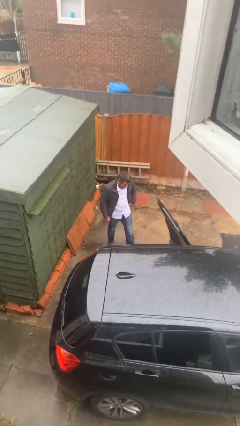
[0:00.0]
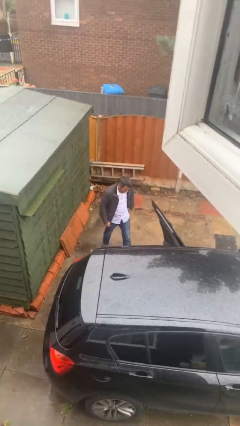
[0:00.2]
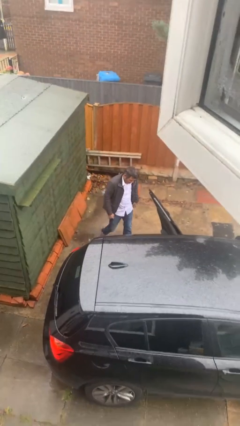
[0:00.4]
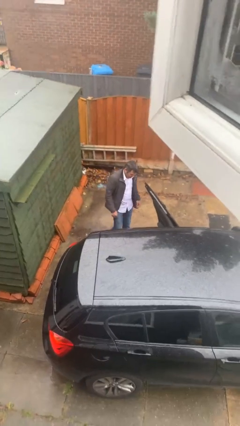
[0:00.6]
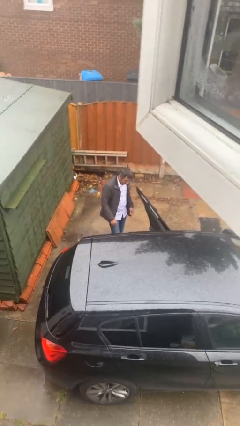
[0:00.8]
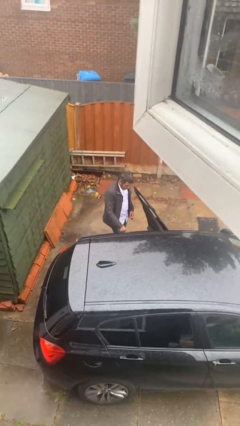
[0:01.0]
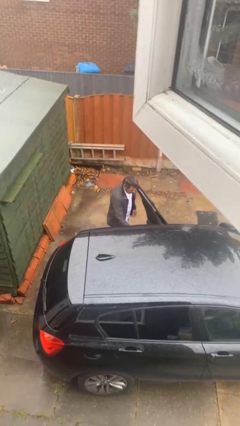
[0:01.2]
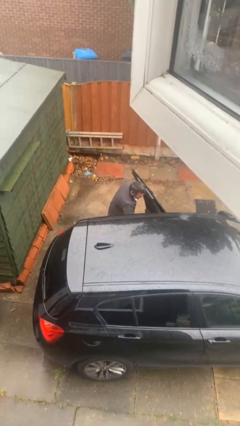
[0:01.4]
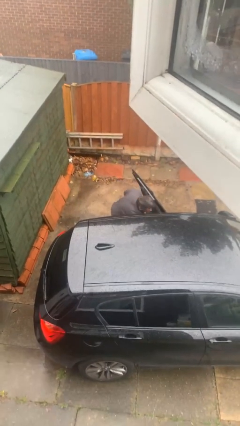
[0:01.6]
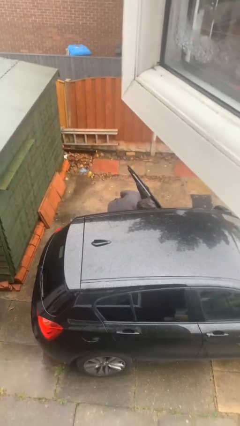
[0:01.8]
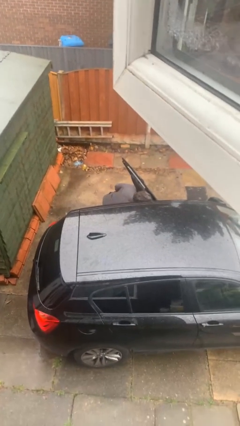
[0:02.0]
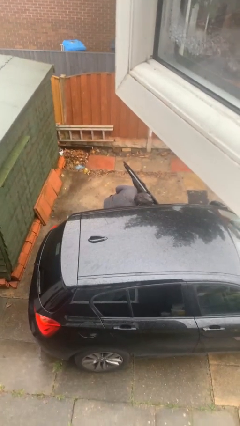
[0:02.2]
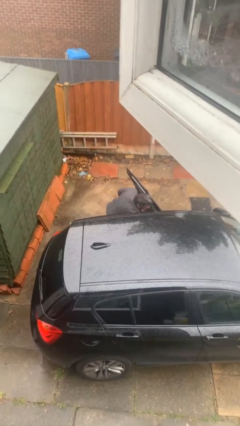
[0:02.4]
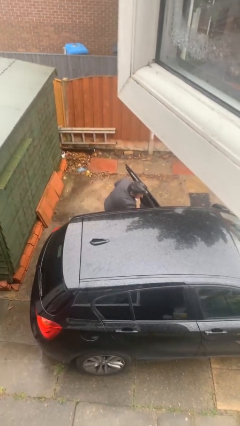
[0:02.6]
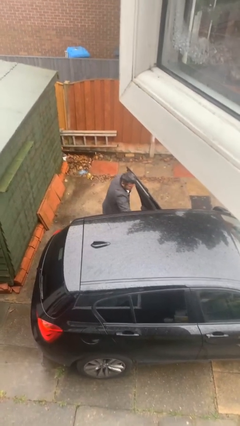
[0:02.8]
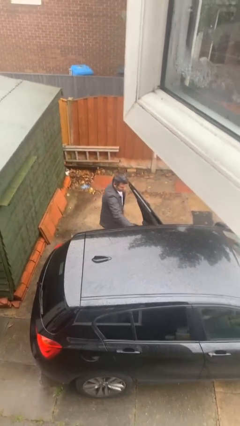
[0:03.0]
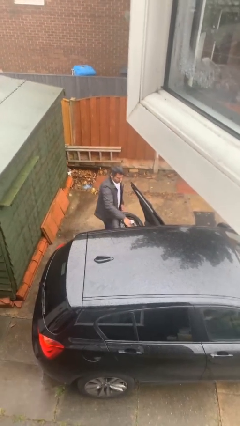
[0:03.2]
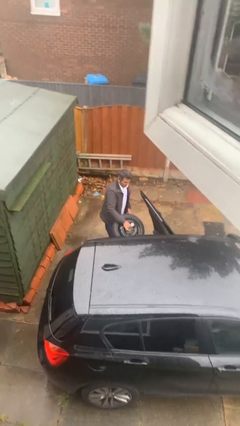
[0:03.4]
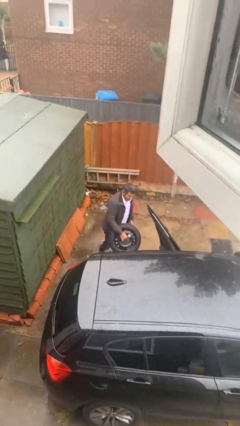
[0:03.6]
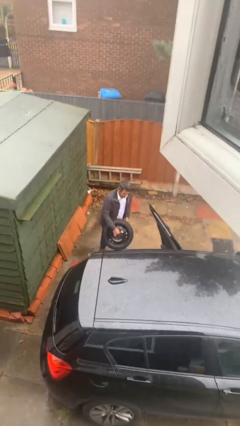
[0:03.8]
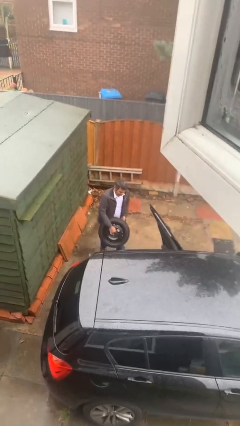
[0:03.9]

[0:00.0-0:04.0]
person unloads car

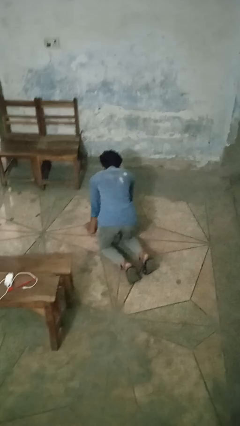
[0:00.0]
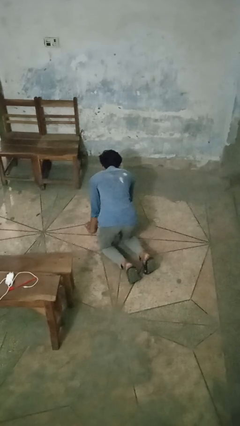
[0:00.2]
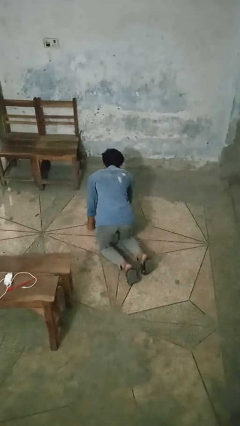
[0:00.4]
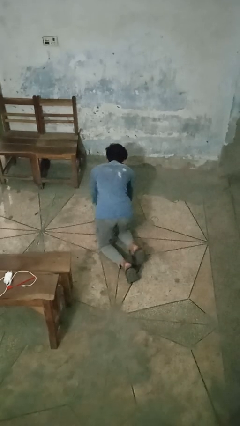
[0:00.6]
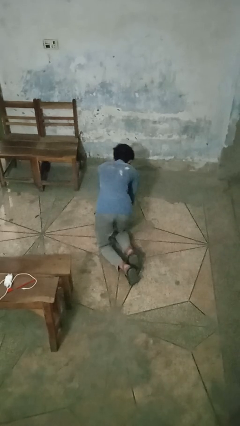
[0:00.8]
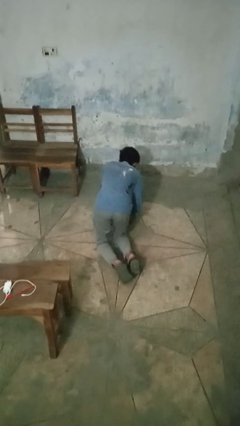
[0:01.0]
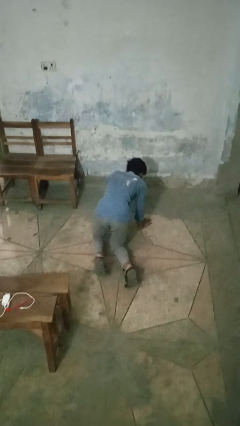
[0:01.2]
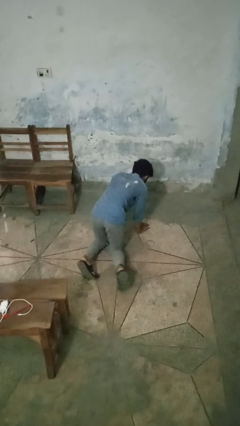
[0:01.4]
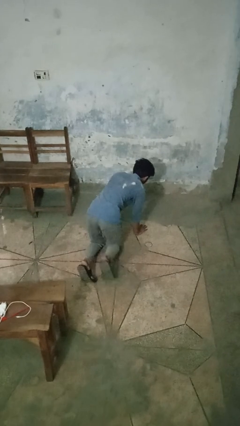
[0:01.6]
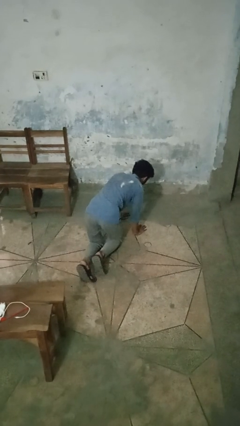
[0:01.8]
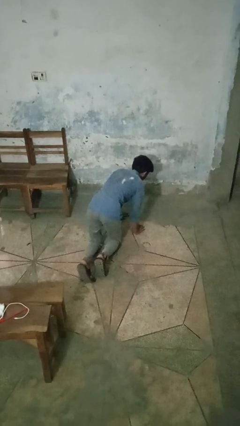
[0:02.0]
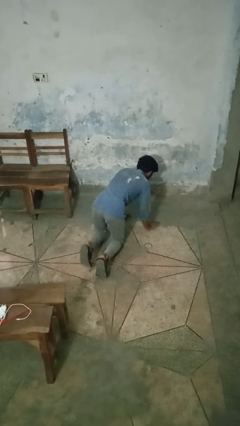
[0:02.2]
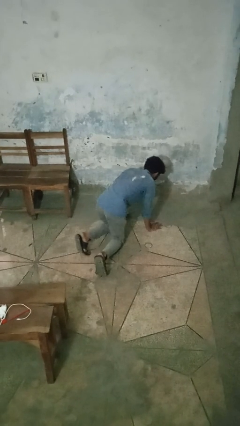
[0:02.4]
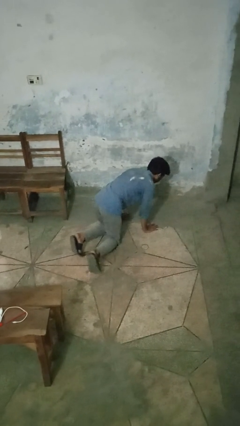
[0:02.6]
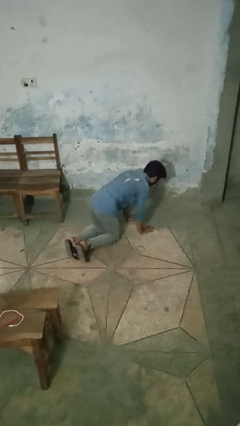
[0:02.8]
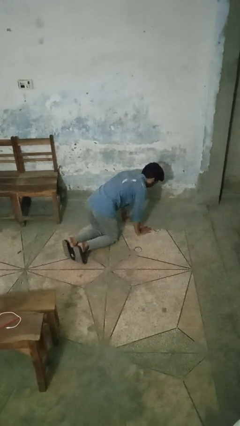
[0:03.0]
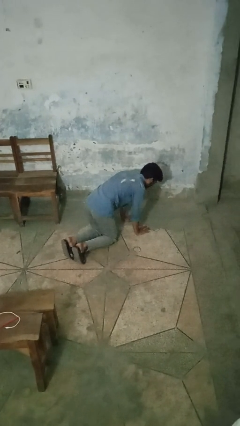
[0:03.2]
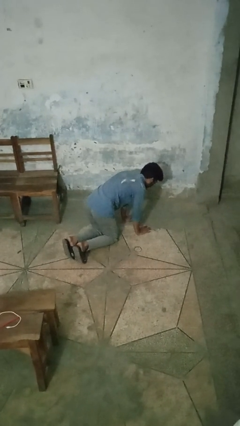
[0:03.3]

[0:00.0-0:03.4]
person crawls

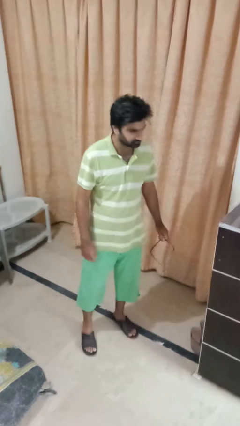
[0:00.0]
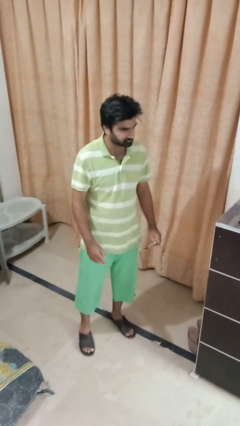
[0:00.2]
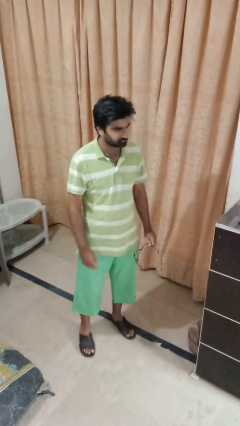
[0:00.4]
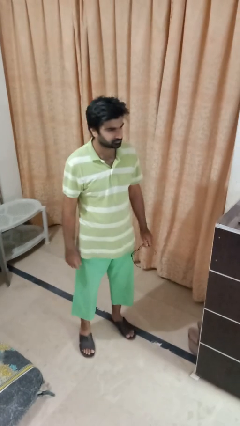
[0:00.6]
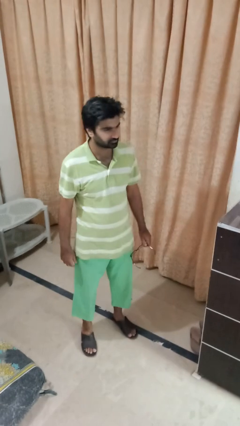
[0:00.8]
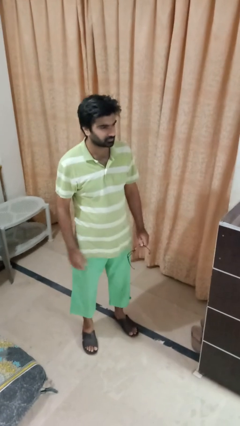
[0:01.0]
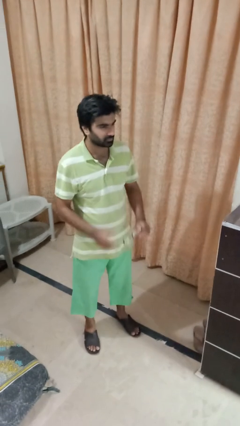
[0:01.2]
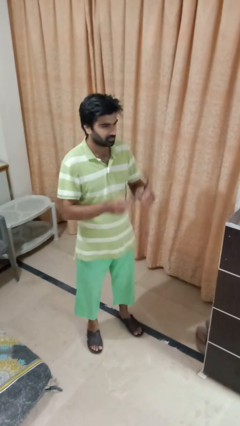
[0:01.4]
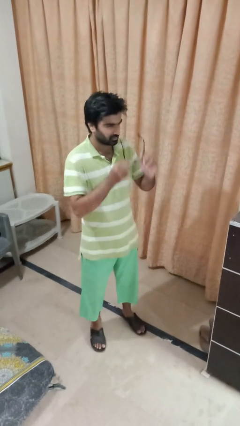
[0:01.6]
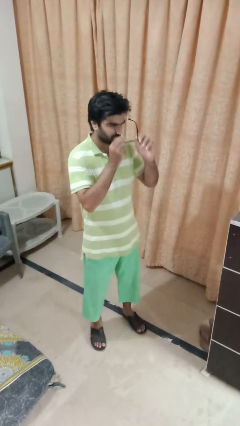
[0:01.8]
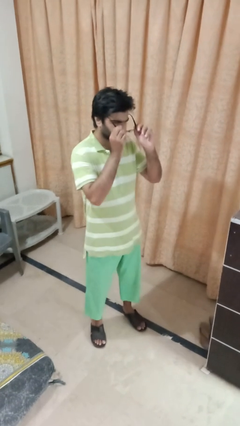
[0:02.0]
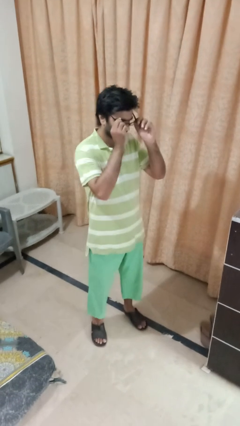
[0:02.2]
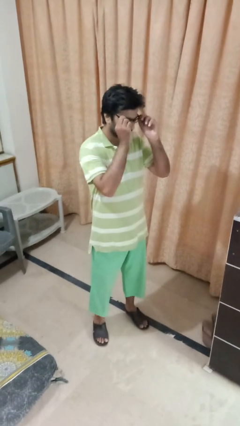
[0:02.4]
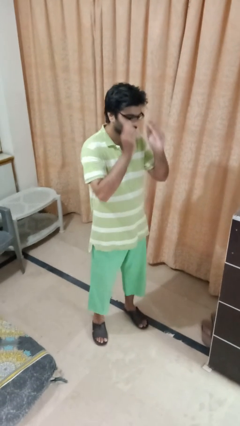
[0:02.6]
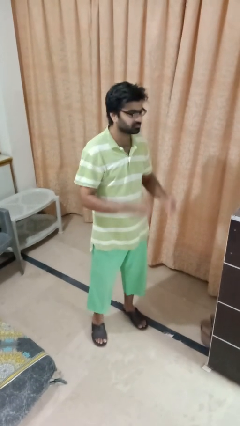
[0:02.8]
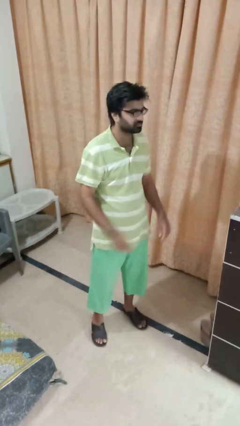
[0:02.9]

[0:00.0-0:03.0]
person puts on glasses

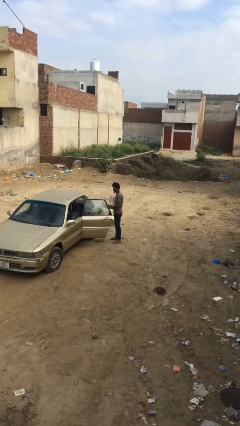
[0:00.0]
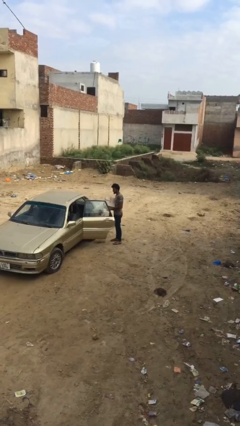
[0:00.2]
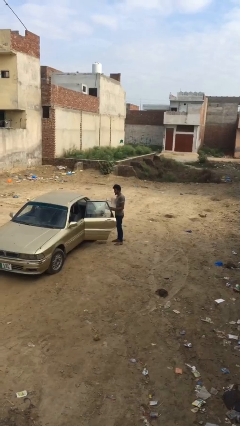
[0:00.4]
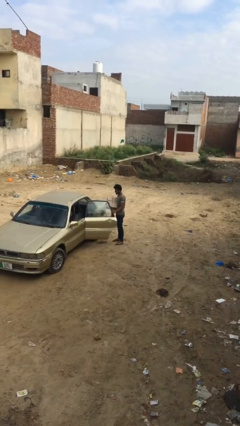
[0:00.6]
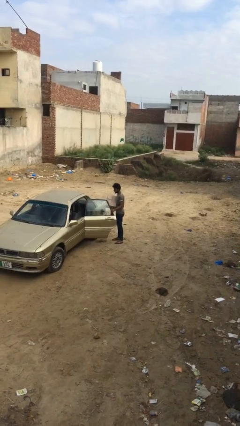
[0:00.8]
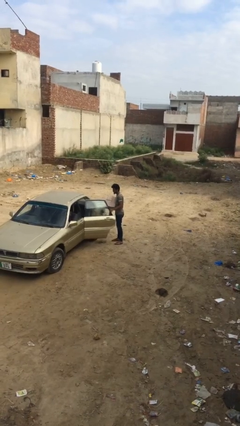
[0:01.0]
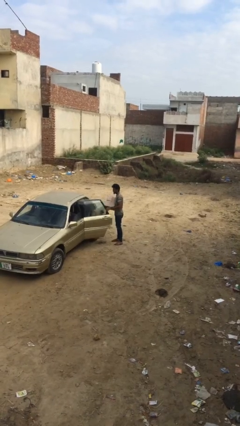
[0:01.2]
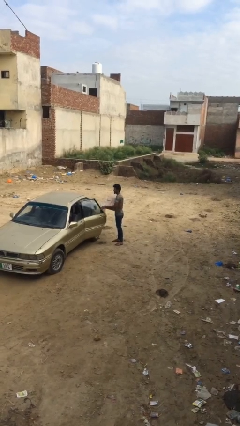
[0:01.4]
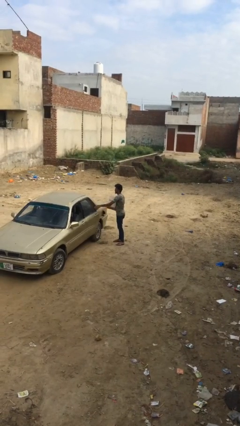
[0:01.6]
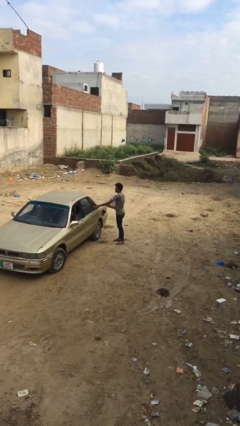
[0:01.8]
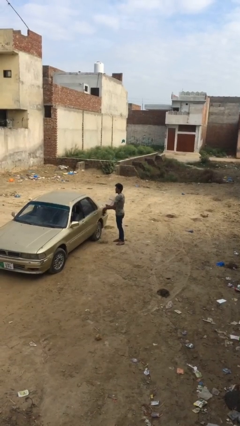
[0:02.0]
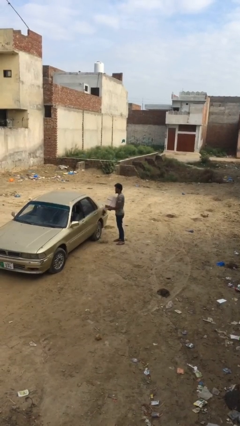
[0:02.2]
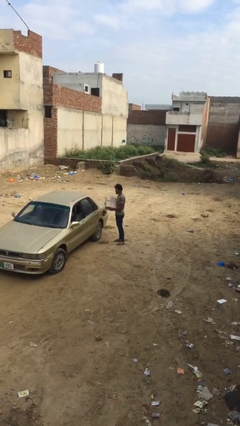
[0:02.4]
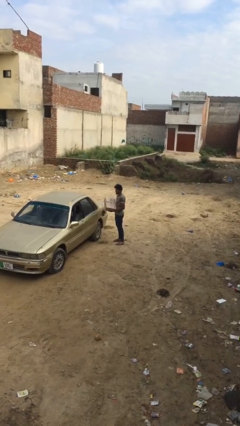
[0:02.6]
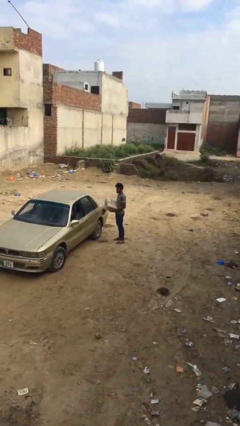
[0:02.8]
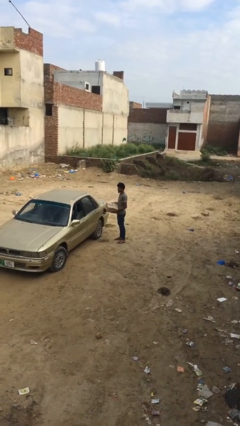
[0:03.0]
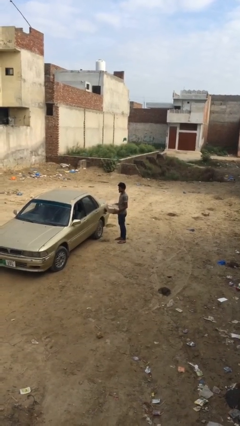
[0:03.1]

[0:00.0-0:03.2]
person closes car door

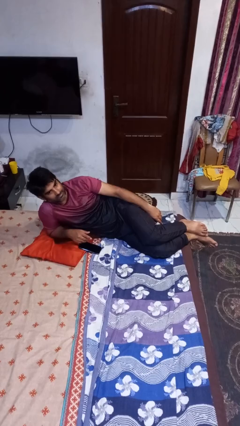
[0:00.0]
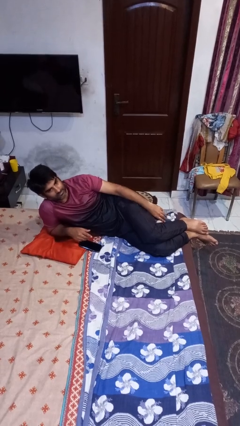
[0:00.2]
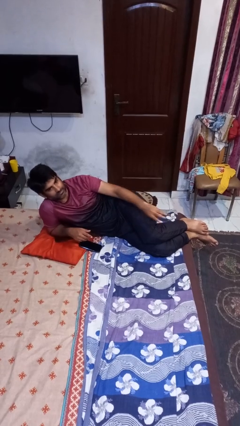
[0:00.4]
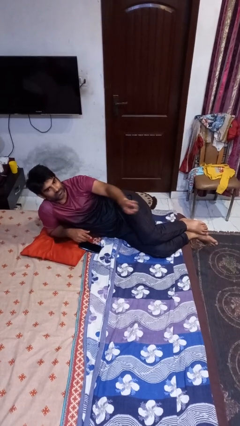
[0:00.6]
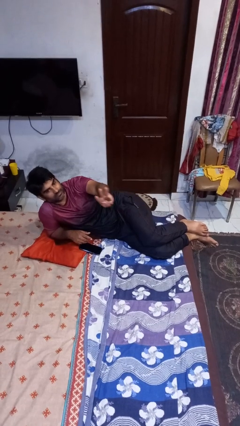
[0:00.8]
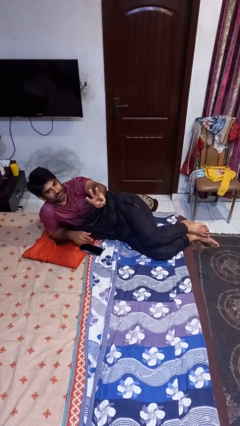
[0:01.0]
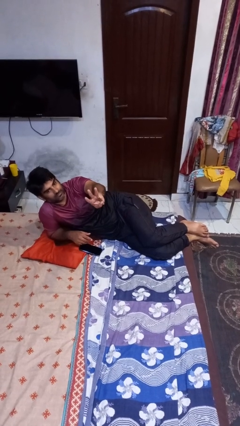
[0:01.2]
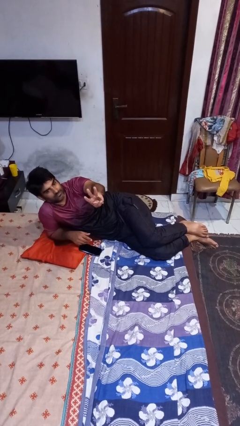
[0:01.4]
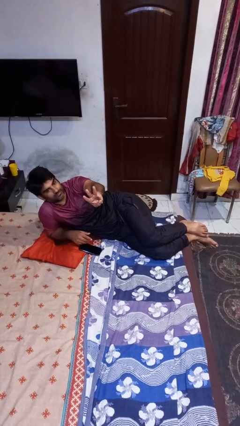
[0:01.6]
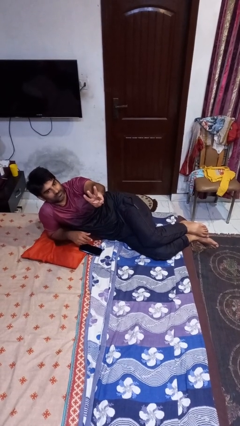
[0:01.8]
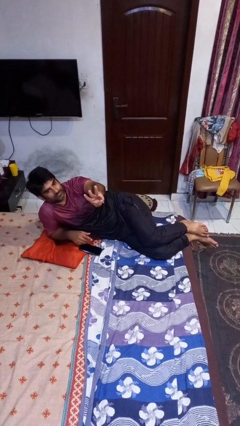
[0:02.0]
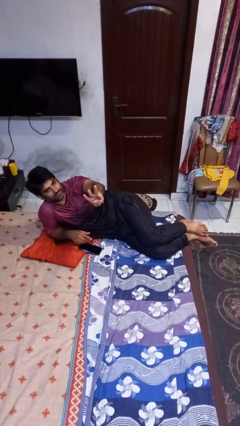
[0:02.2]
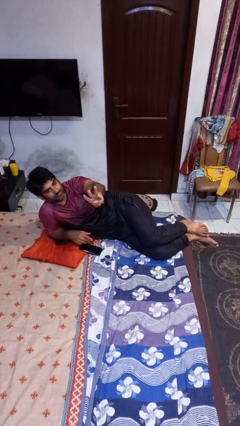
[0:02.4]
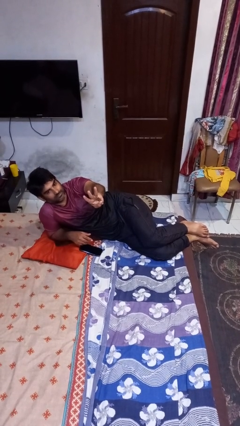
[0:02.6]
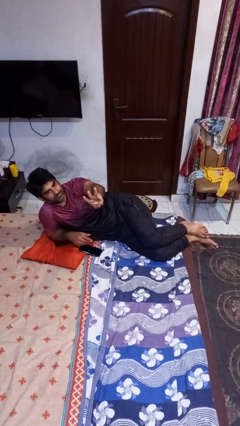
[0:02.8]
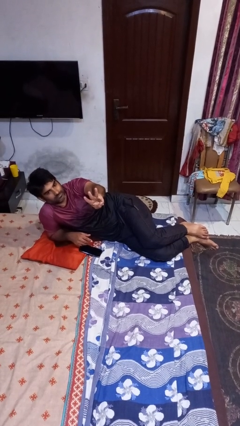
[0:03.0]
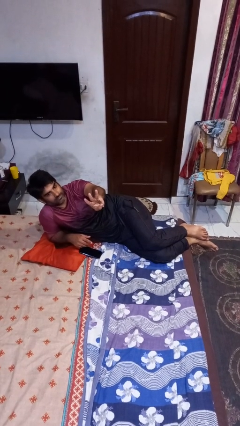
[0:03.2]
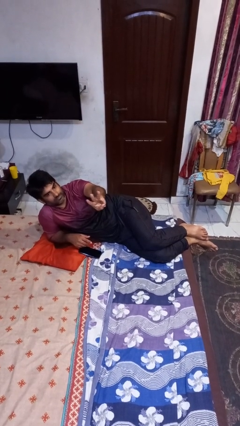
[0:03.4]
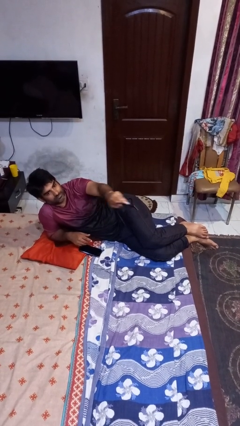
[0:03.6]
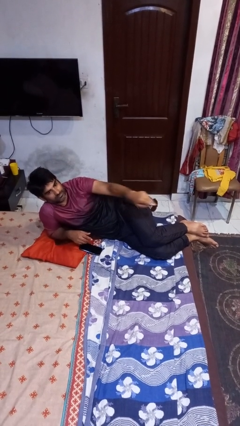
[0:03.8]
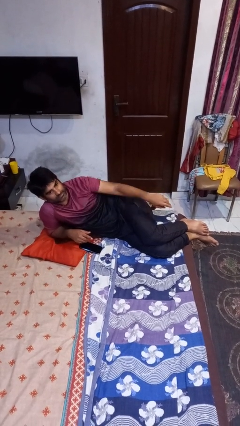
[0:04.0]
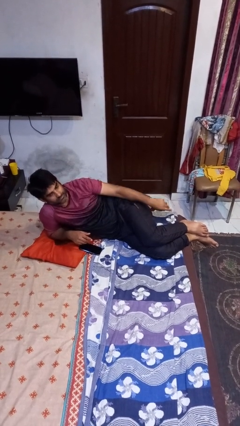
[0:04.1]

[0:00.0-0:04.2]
person gestures number three

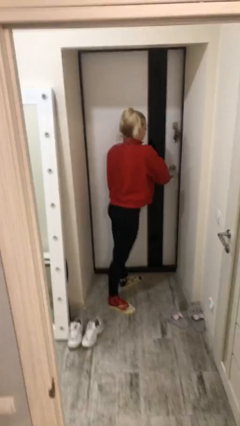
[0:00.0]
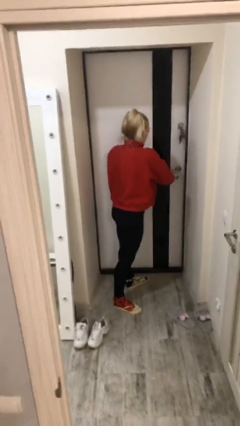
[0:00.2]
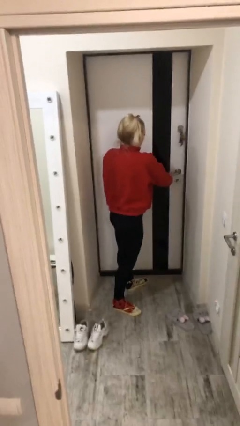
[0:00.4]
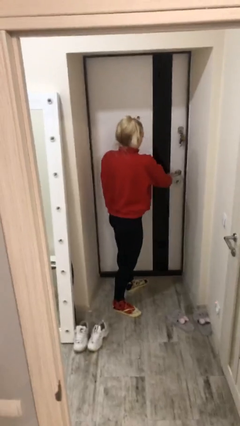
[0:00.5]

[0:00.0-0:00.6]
person closes facility door
